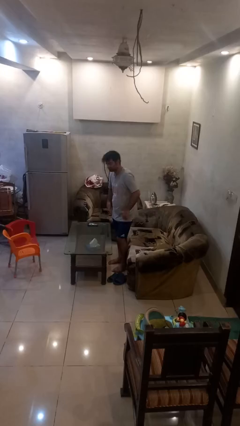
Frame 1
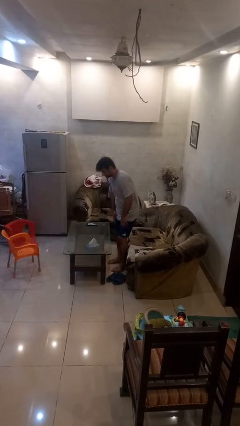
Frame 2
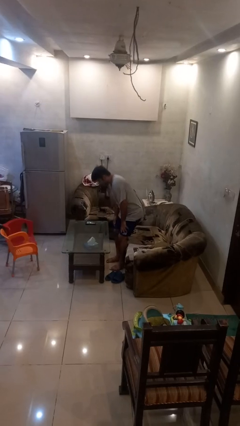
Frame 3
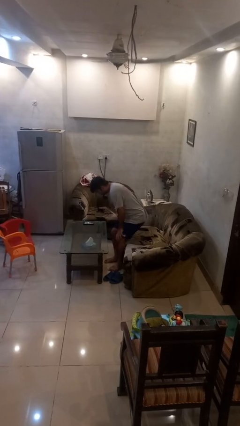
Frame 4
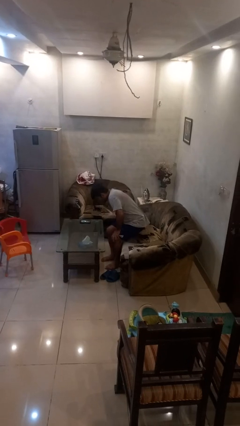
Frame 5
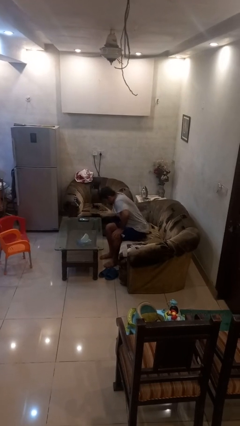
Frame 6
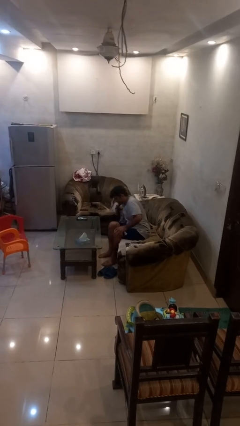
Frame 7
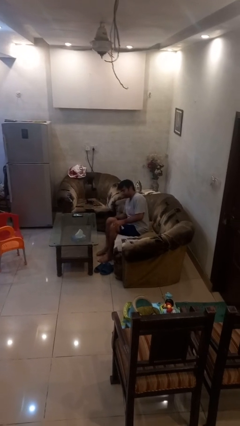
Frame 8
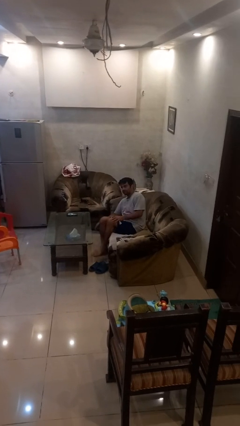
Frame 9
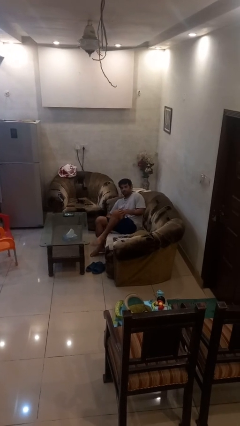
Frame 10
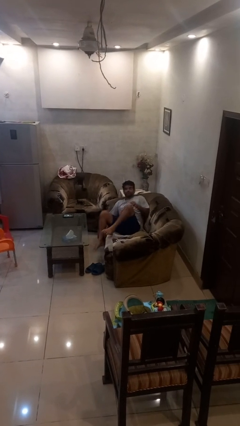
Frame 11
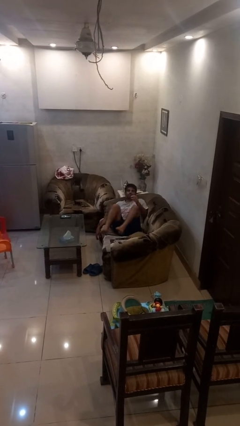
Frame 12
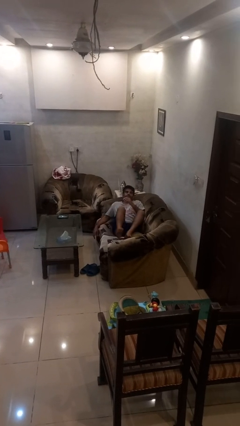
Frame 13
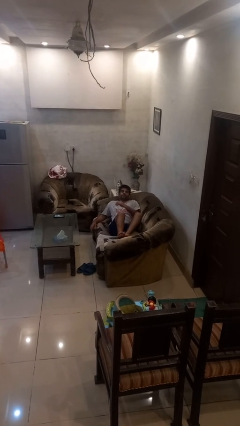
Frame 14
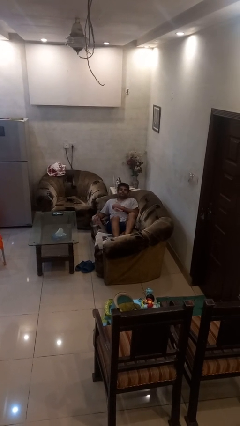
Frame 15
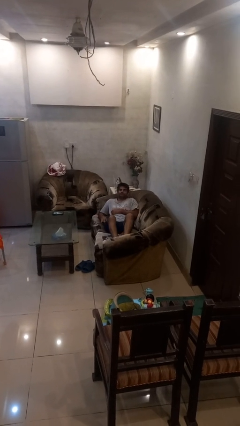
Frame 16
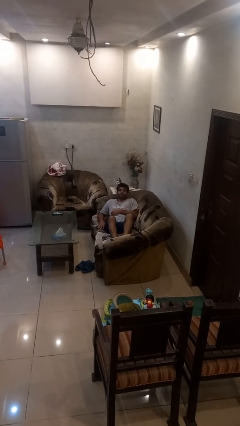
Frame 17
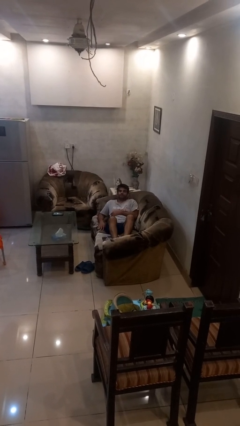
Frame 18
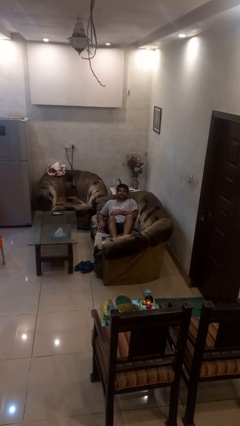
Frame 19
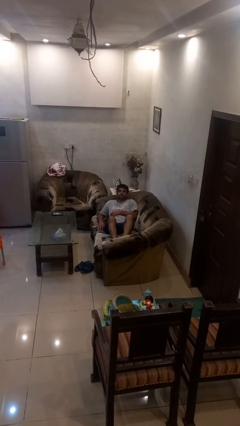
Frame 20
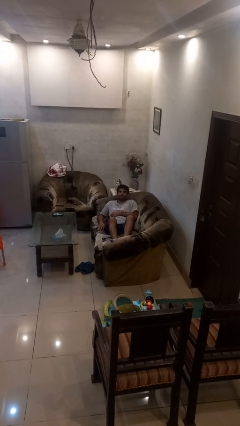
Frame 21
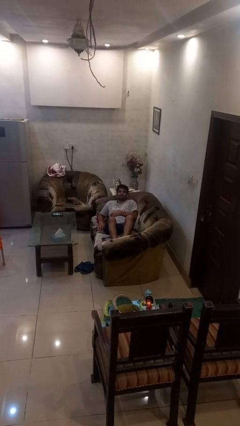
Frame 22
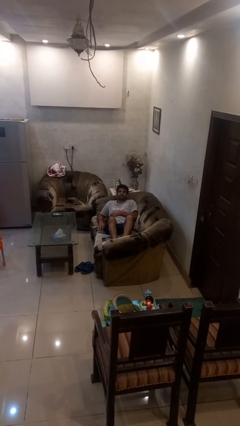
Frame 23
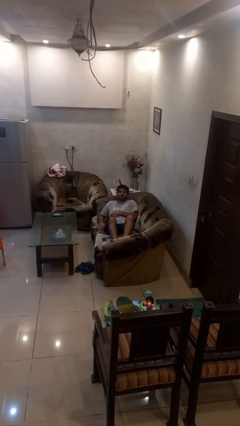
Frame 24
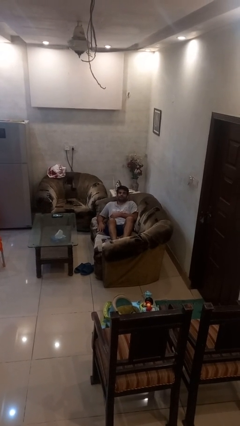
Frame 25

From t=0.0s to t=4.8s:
person lies down on couch

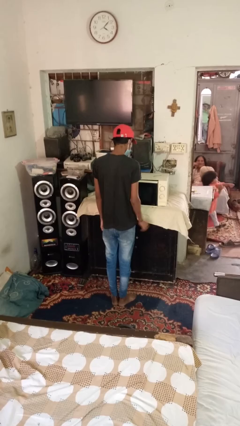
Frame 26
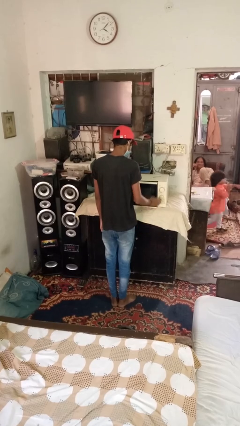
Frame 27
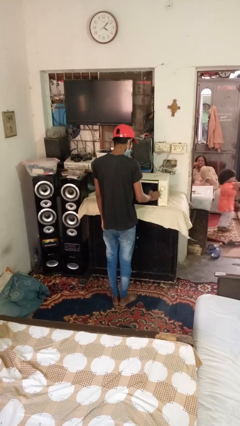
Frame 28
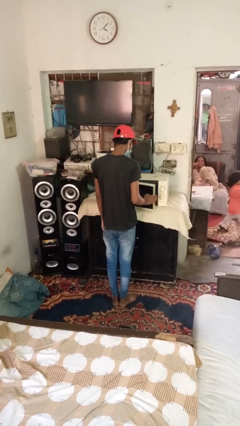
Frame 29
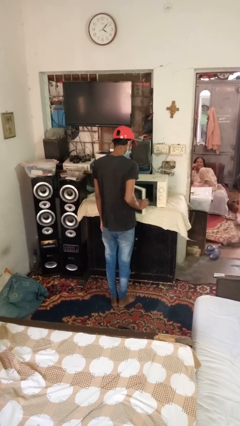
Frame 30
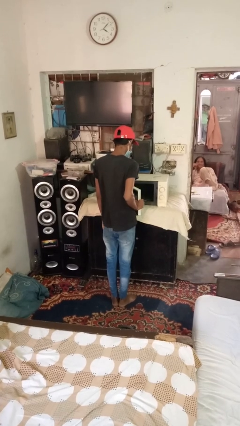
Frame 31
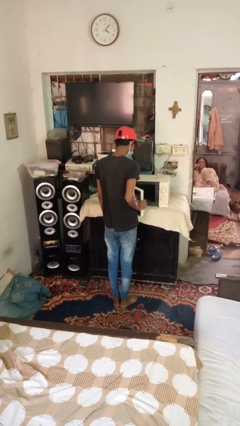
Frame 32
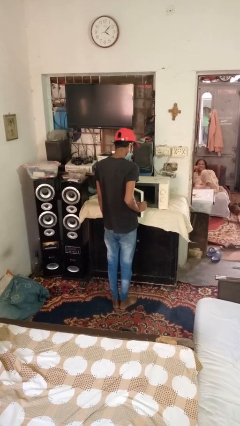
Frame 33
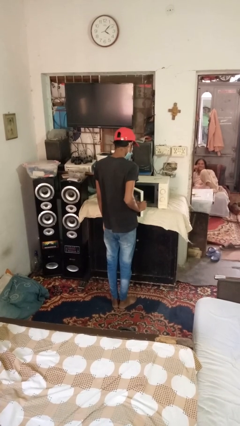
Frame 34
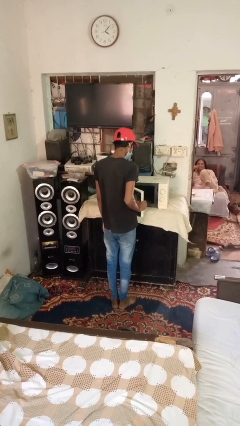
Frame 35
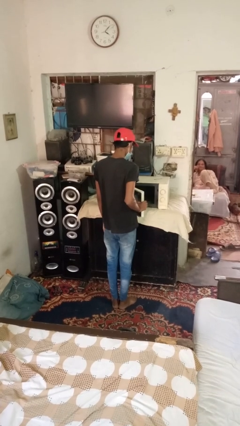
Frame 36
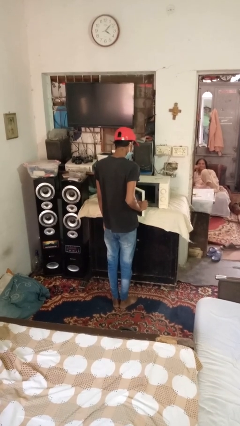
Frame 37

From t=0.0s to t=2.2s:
person opens dishwasher

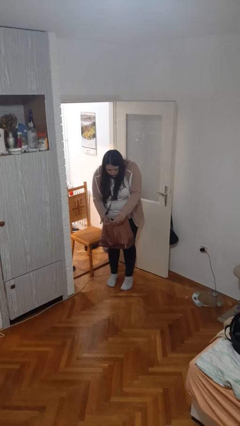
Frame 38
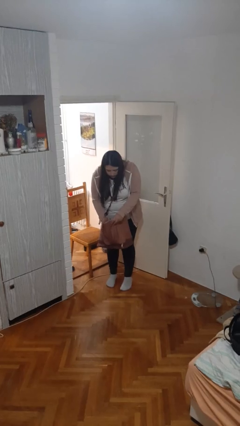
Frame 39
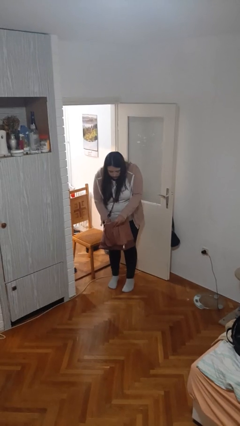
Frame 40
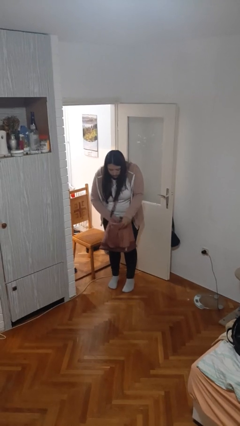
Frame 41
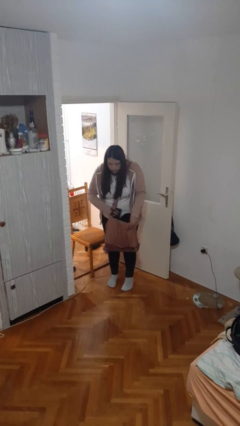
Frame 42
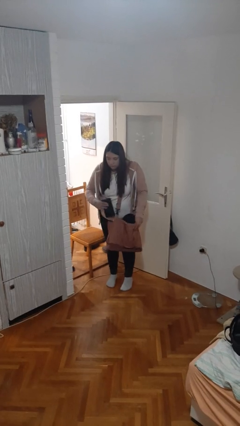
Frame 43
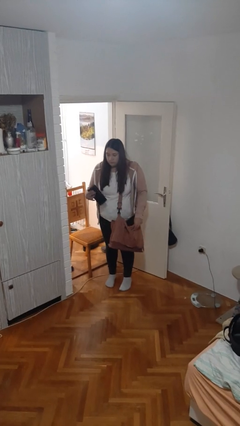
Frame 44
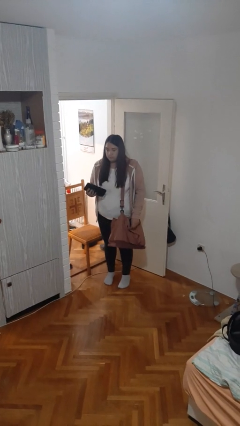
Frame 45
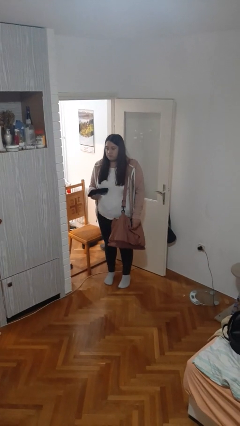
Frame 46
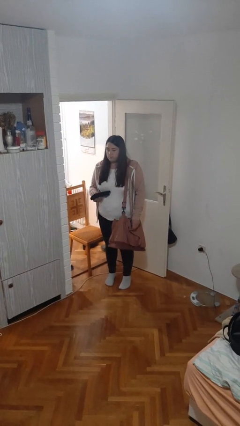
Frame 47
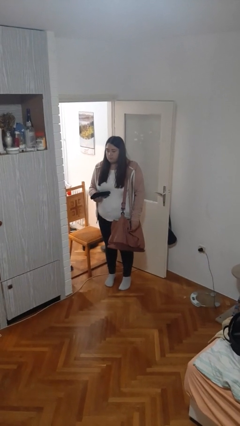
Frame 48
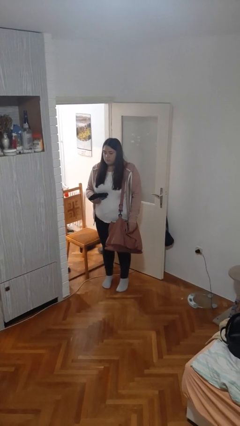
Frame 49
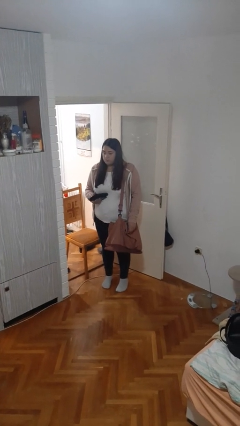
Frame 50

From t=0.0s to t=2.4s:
person takes object from purse

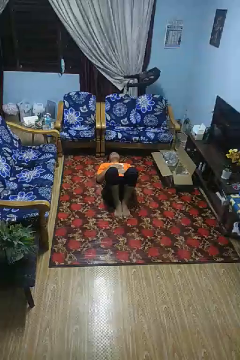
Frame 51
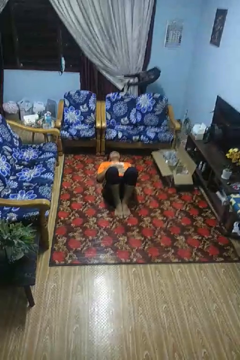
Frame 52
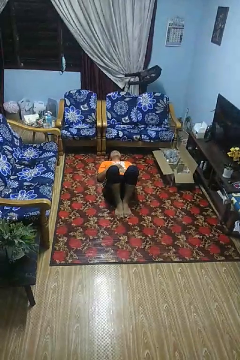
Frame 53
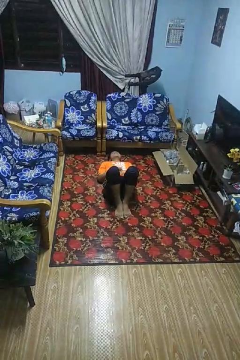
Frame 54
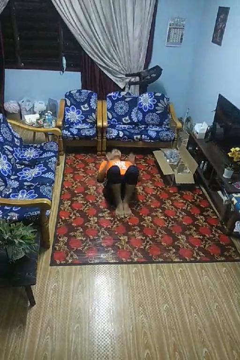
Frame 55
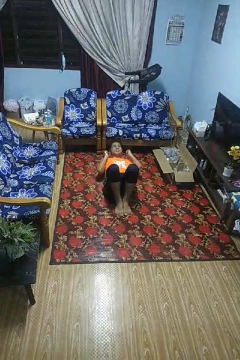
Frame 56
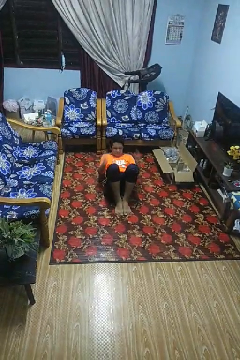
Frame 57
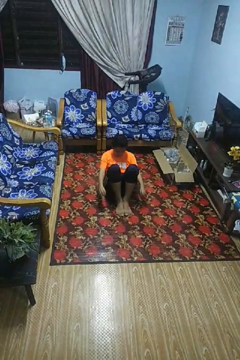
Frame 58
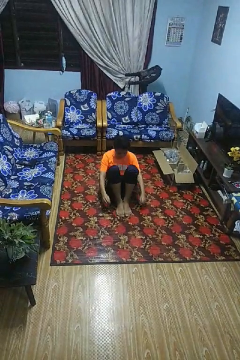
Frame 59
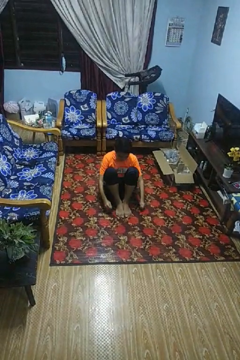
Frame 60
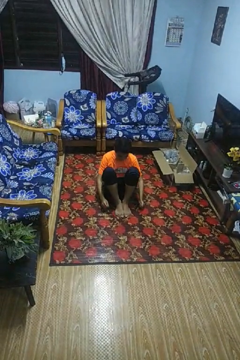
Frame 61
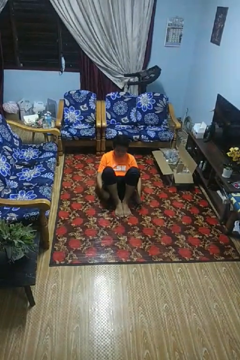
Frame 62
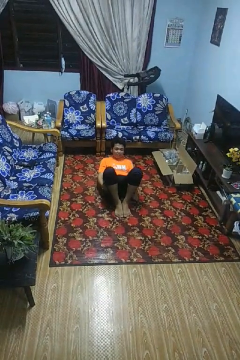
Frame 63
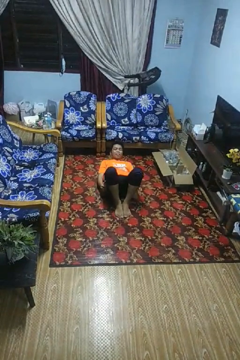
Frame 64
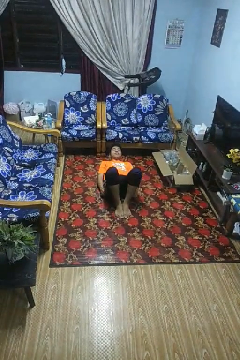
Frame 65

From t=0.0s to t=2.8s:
person exercises with situp

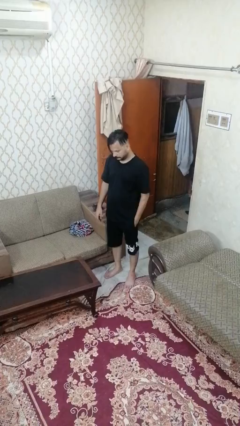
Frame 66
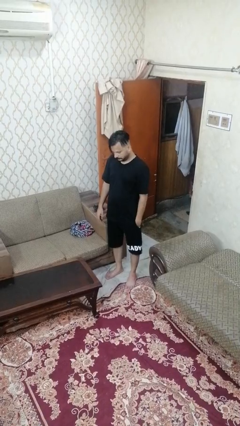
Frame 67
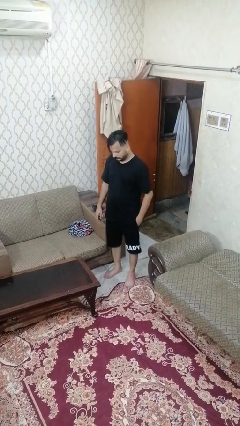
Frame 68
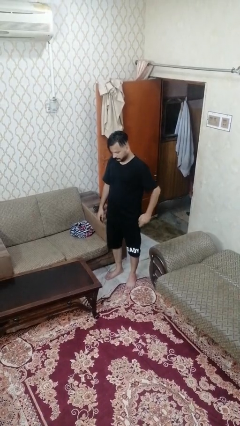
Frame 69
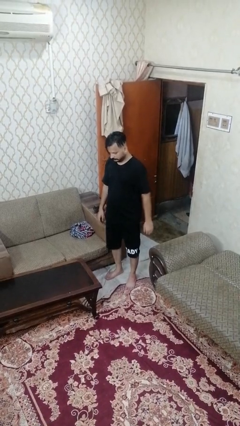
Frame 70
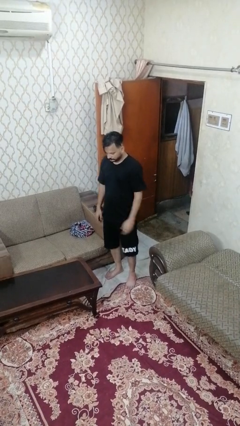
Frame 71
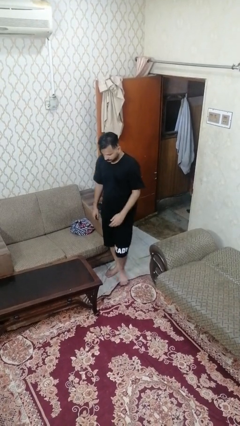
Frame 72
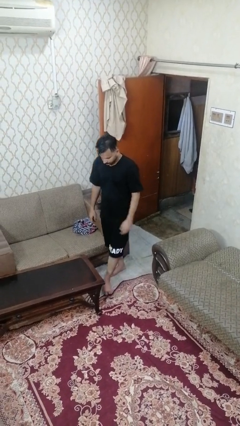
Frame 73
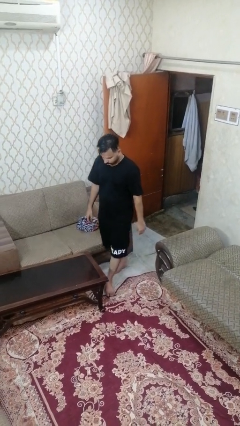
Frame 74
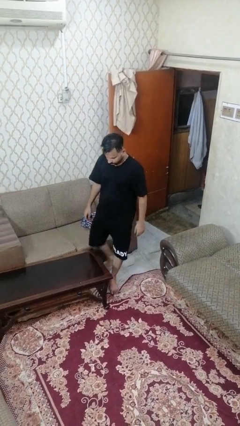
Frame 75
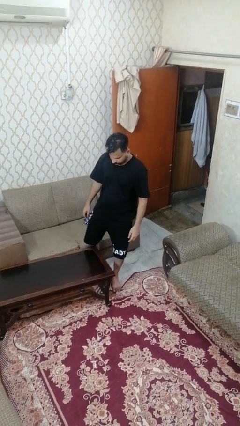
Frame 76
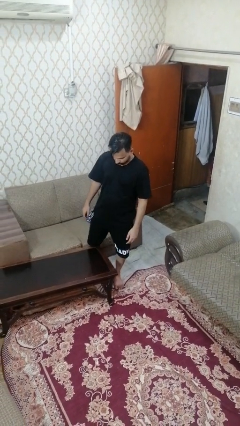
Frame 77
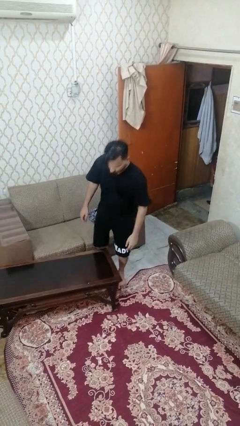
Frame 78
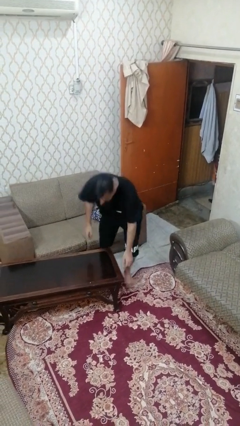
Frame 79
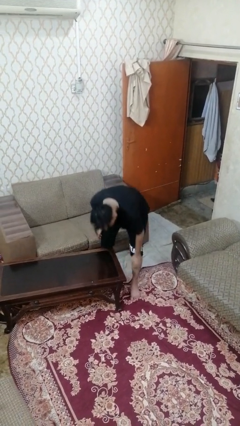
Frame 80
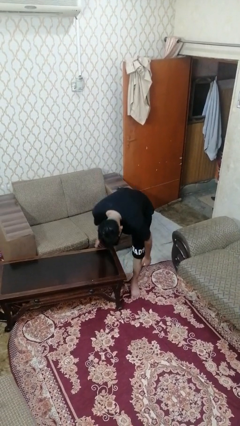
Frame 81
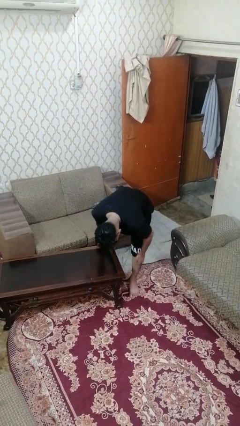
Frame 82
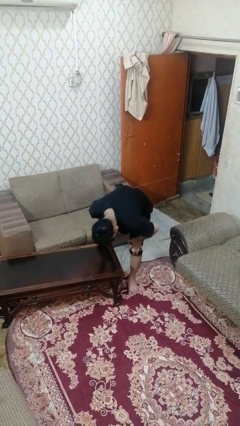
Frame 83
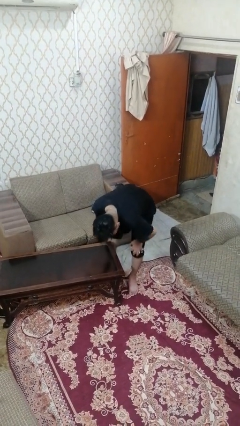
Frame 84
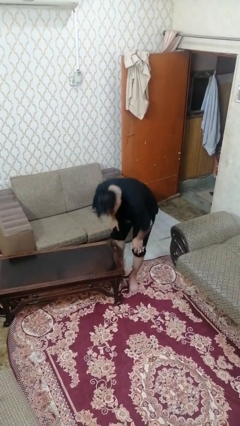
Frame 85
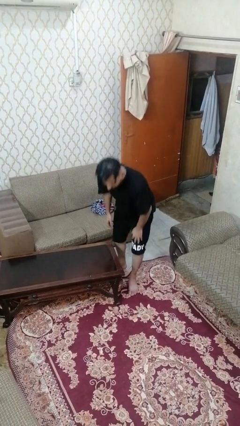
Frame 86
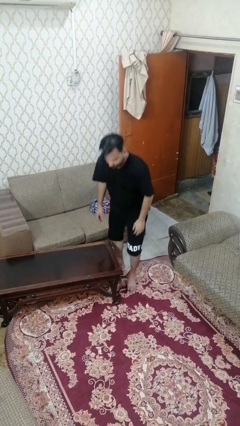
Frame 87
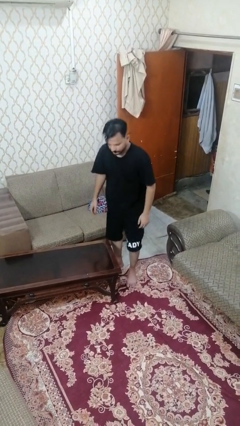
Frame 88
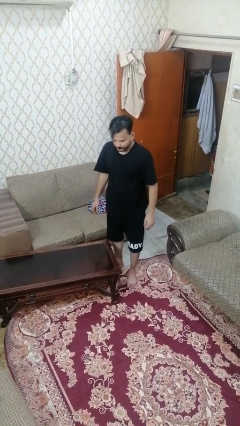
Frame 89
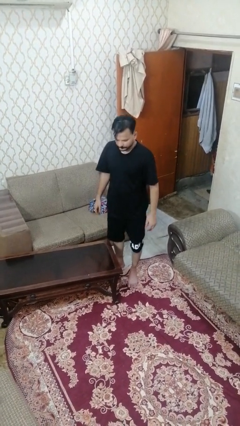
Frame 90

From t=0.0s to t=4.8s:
person knocks over furniture

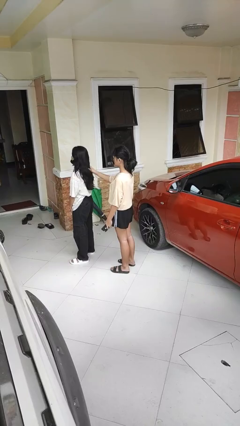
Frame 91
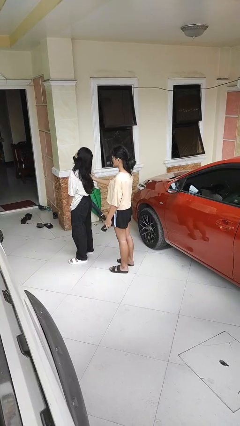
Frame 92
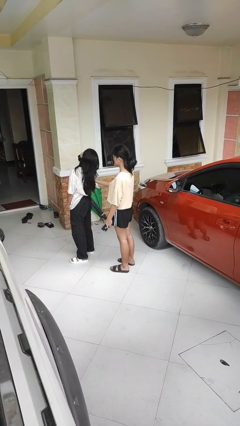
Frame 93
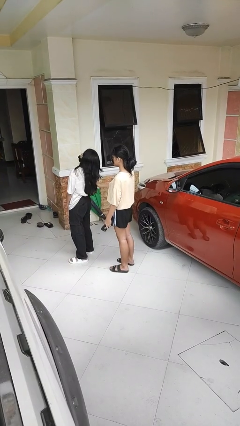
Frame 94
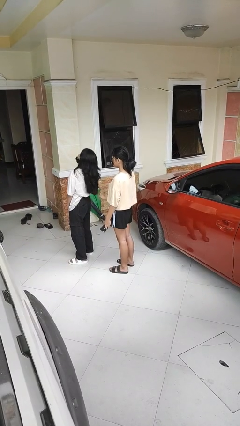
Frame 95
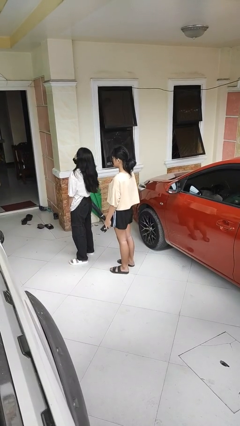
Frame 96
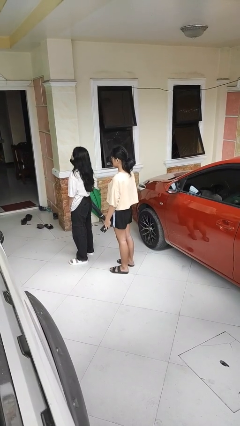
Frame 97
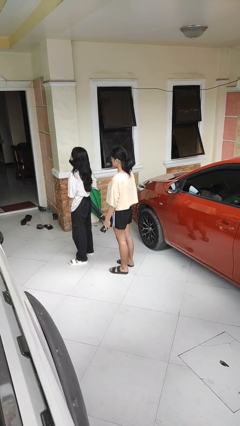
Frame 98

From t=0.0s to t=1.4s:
person grabs person by hair
